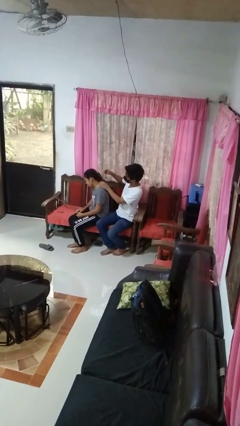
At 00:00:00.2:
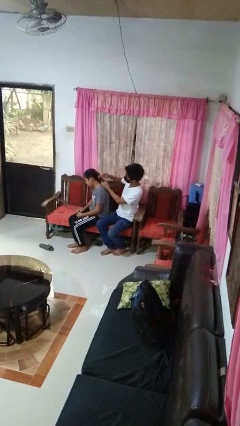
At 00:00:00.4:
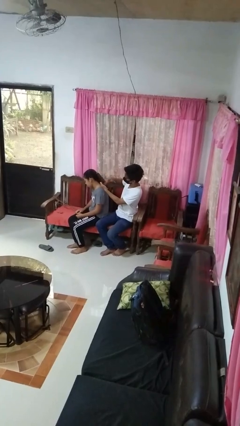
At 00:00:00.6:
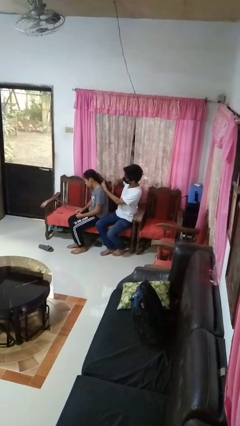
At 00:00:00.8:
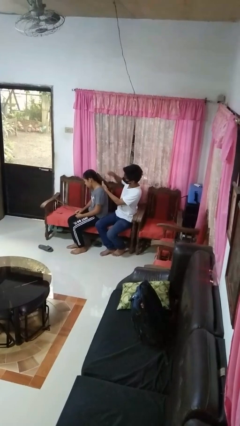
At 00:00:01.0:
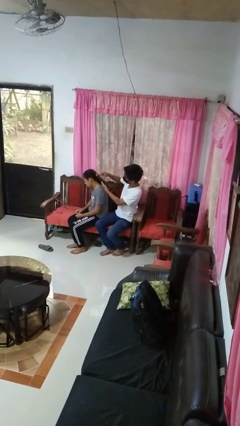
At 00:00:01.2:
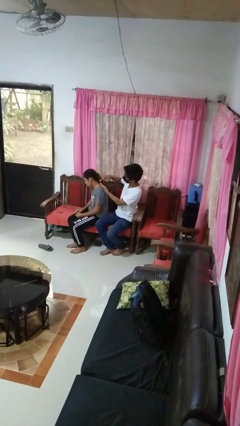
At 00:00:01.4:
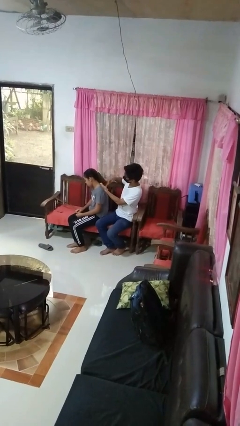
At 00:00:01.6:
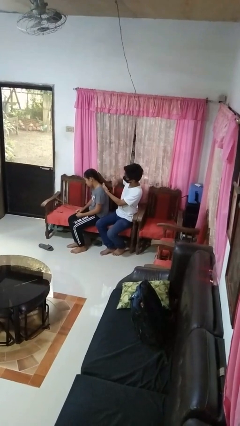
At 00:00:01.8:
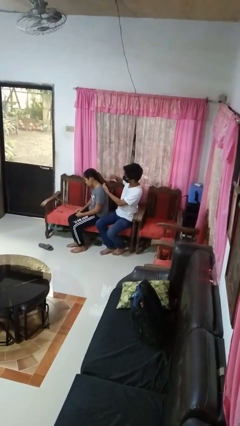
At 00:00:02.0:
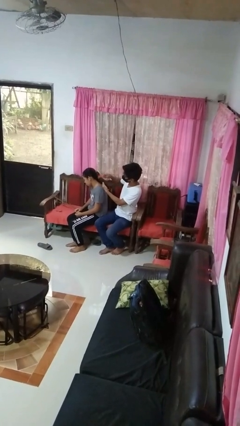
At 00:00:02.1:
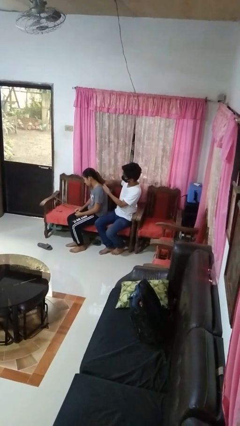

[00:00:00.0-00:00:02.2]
person brushes hair of person

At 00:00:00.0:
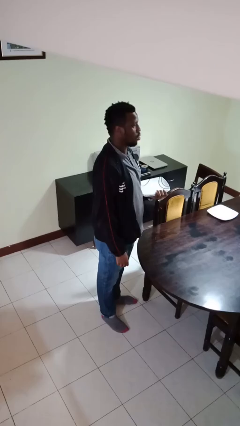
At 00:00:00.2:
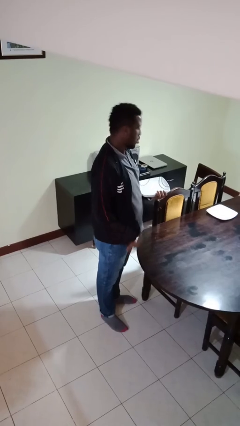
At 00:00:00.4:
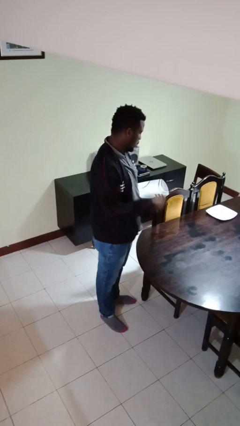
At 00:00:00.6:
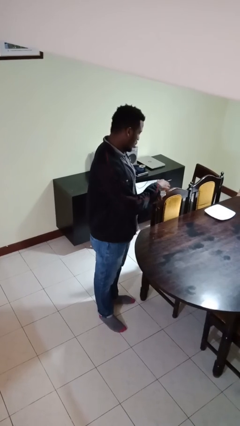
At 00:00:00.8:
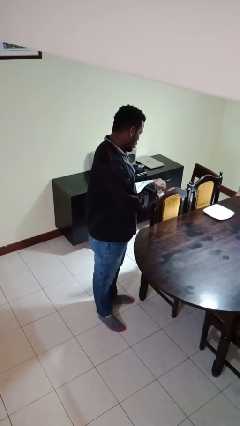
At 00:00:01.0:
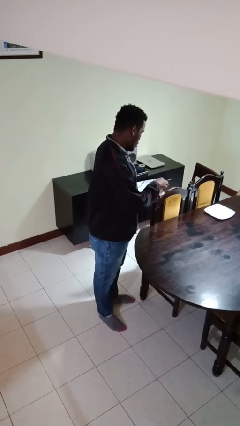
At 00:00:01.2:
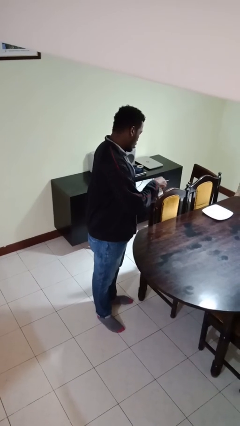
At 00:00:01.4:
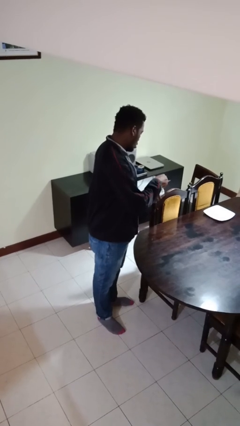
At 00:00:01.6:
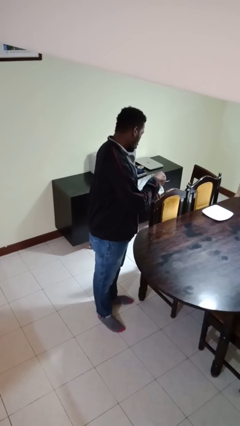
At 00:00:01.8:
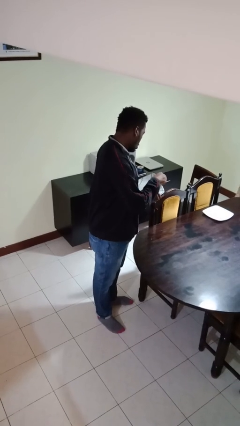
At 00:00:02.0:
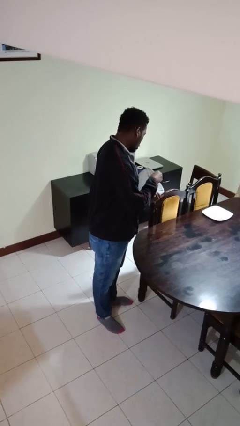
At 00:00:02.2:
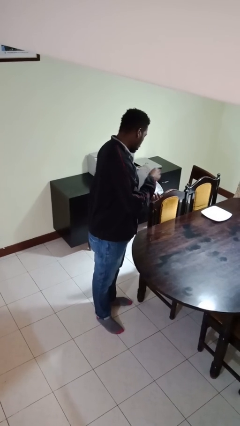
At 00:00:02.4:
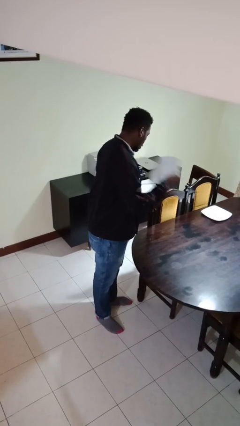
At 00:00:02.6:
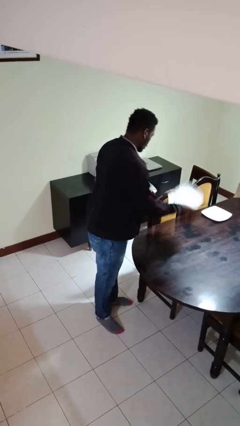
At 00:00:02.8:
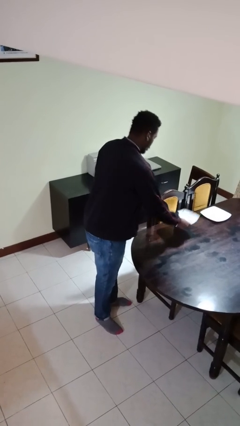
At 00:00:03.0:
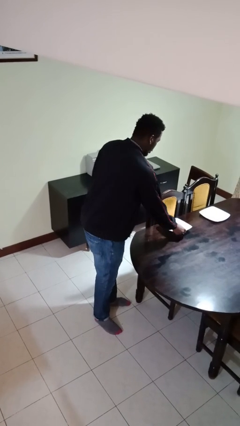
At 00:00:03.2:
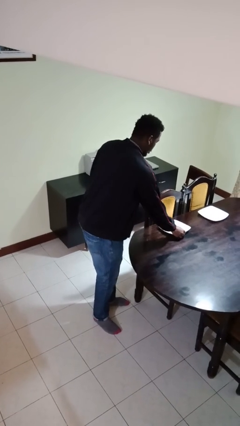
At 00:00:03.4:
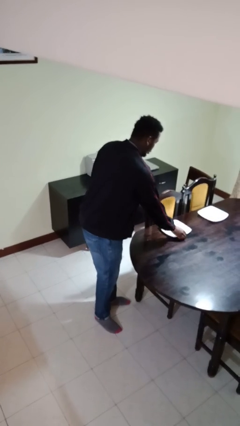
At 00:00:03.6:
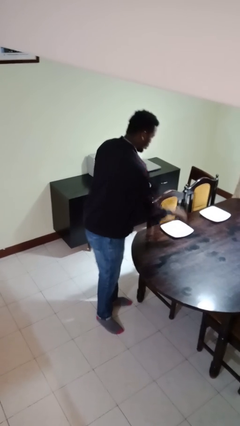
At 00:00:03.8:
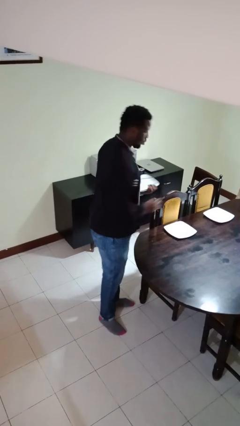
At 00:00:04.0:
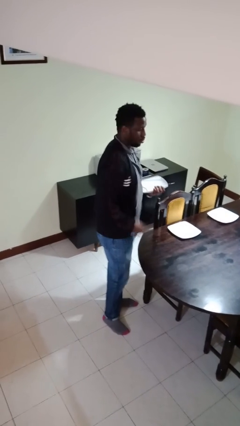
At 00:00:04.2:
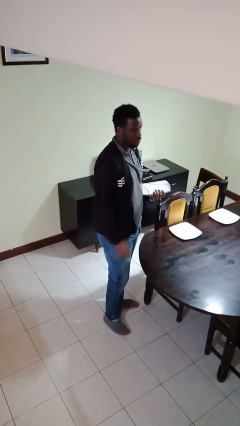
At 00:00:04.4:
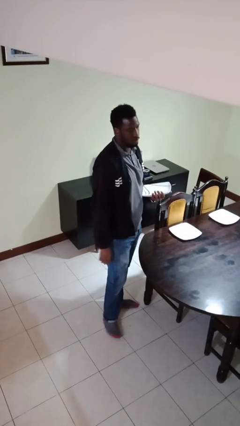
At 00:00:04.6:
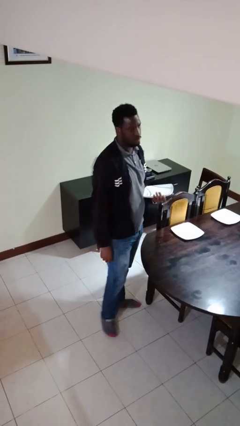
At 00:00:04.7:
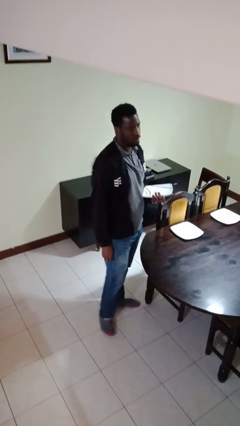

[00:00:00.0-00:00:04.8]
person sets table

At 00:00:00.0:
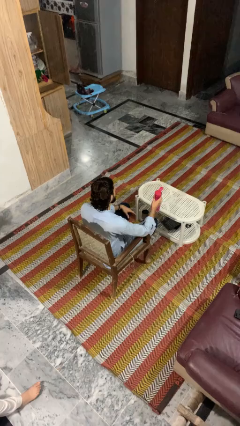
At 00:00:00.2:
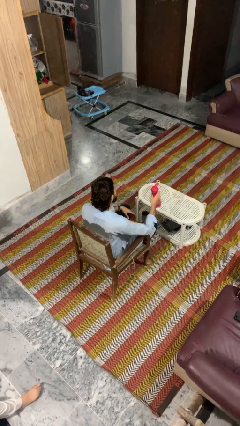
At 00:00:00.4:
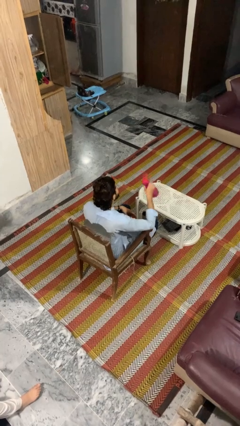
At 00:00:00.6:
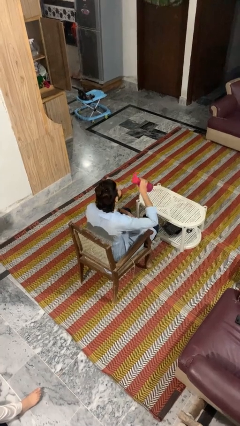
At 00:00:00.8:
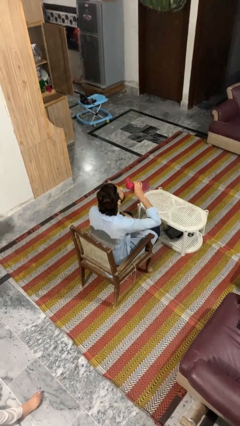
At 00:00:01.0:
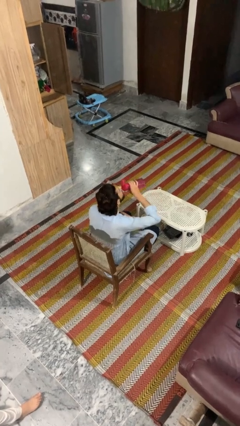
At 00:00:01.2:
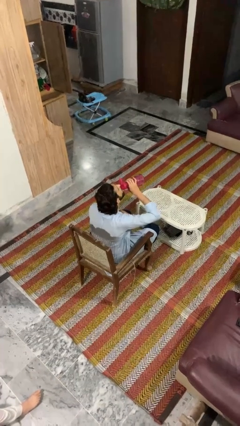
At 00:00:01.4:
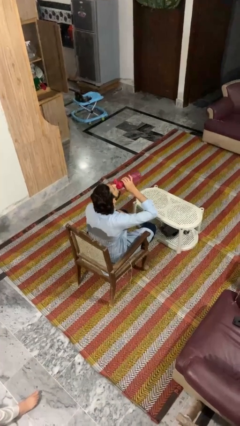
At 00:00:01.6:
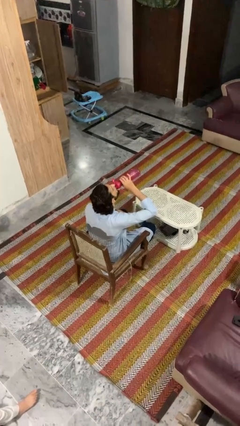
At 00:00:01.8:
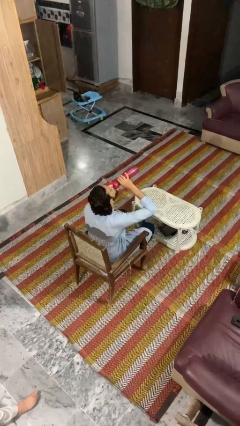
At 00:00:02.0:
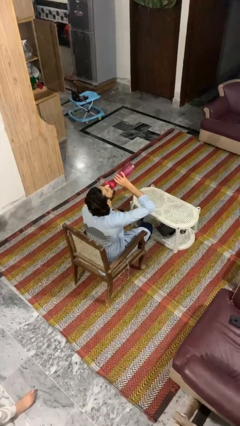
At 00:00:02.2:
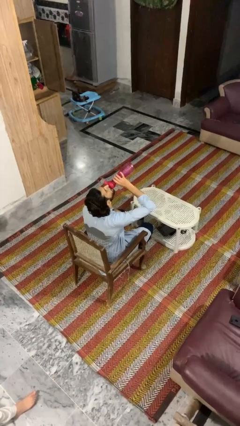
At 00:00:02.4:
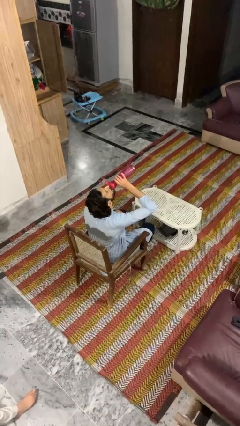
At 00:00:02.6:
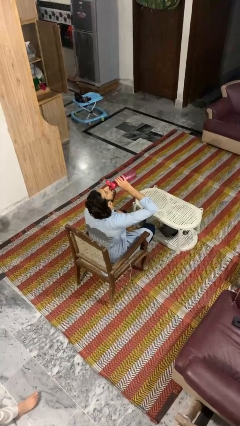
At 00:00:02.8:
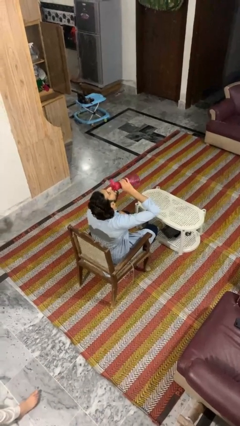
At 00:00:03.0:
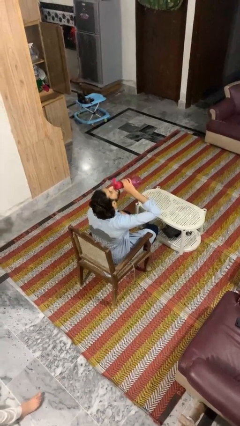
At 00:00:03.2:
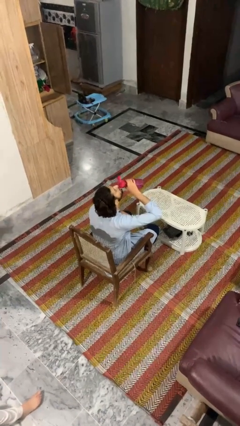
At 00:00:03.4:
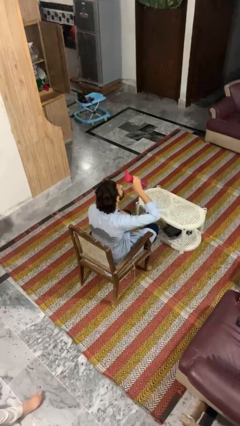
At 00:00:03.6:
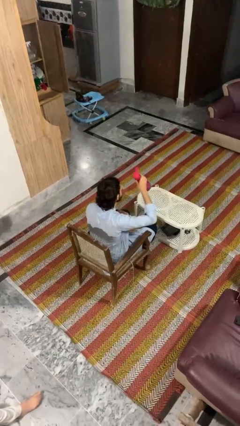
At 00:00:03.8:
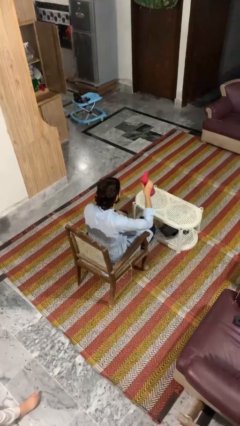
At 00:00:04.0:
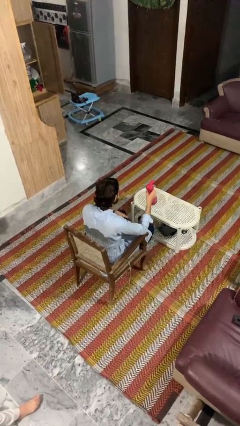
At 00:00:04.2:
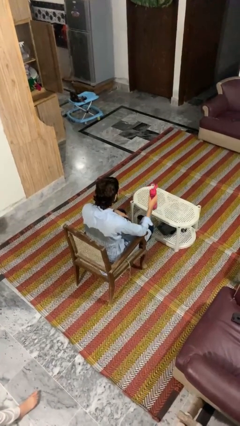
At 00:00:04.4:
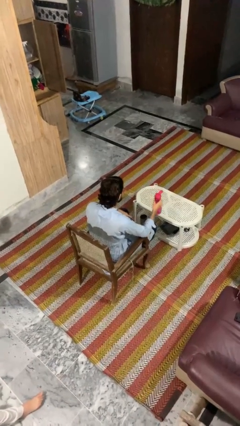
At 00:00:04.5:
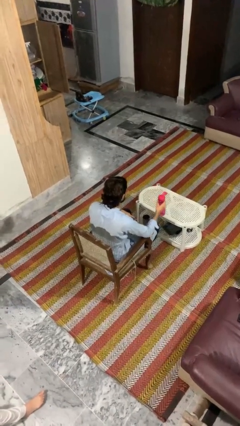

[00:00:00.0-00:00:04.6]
person drinks from bottle

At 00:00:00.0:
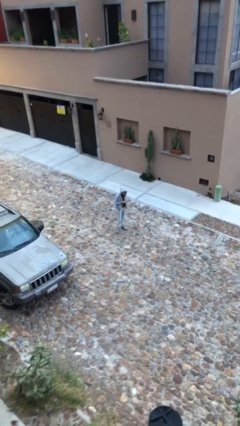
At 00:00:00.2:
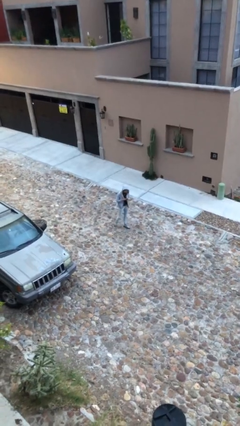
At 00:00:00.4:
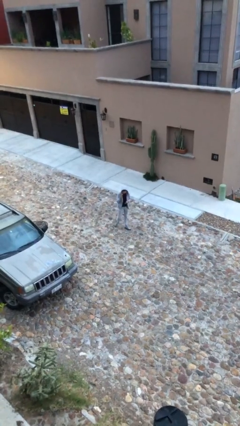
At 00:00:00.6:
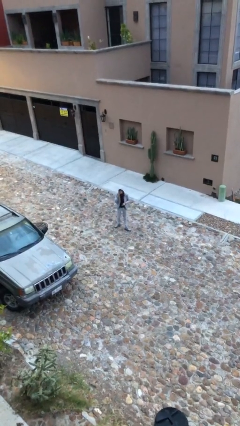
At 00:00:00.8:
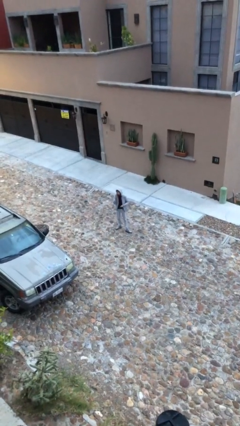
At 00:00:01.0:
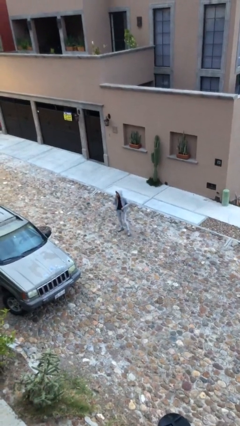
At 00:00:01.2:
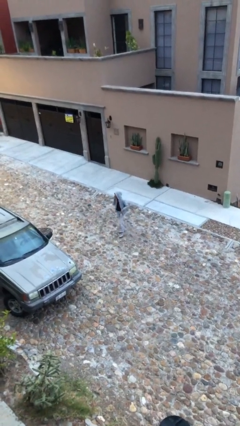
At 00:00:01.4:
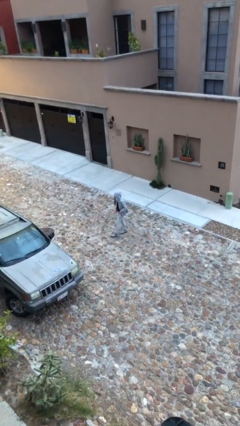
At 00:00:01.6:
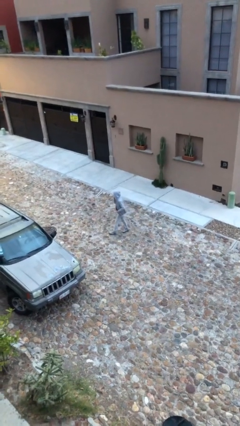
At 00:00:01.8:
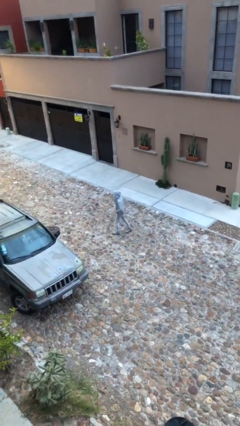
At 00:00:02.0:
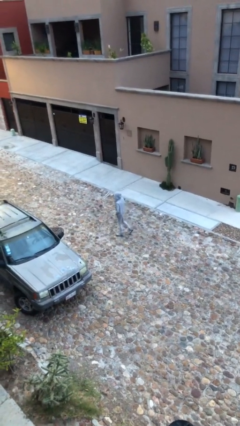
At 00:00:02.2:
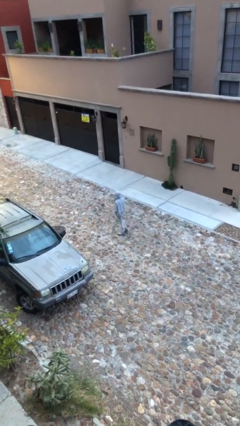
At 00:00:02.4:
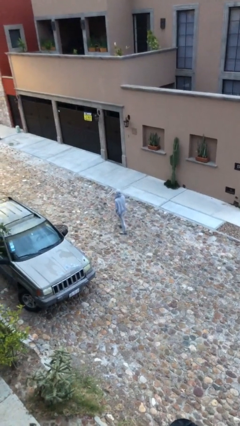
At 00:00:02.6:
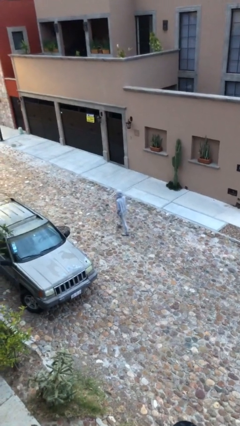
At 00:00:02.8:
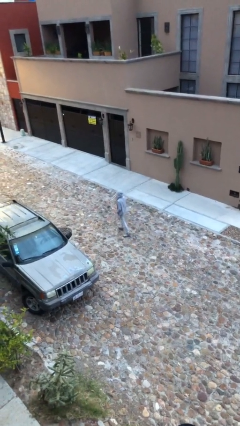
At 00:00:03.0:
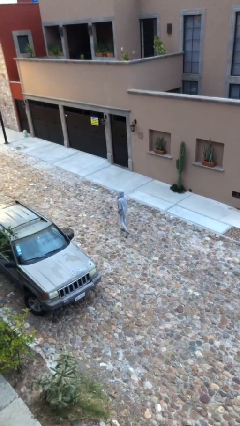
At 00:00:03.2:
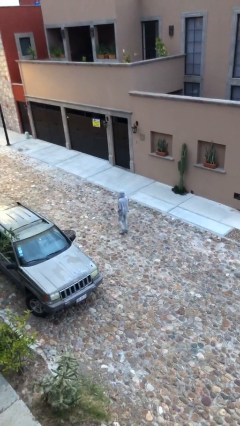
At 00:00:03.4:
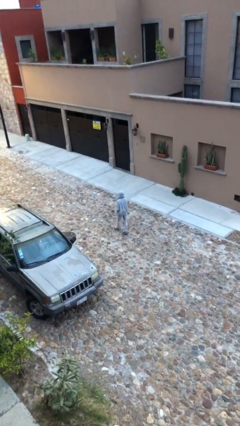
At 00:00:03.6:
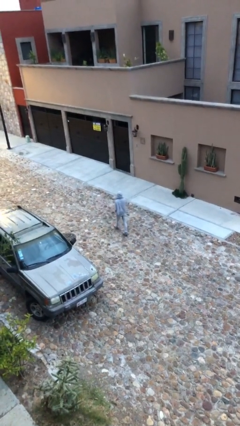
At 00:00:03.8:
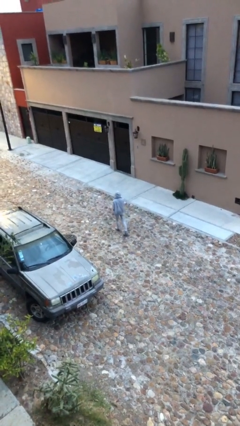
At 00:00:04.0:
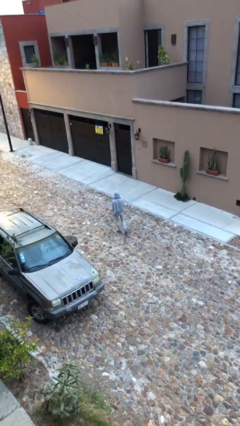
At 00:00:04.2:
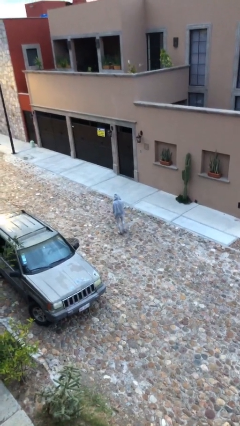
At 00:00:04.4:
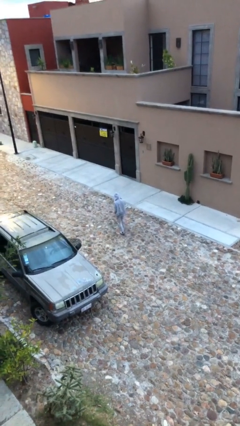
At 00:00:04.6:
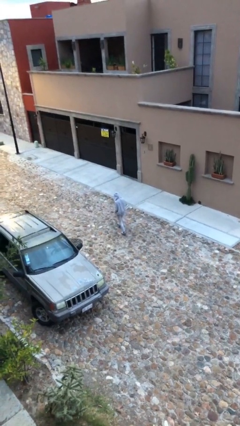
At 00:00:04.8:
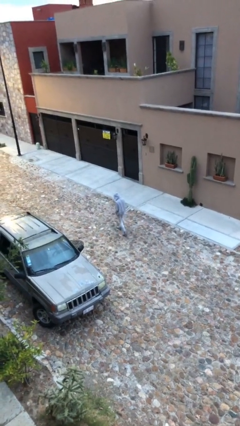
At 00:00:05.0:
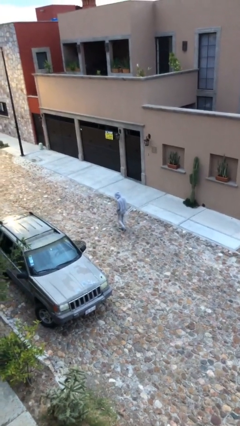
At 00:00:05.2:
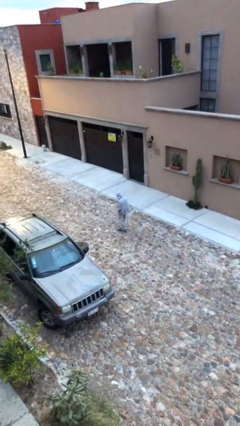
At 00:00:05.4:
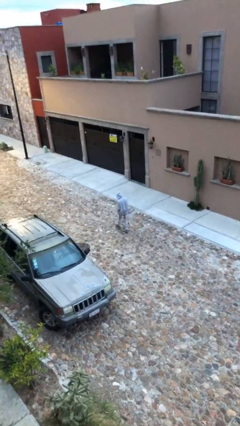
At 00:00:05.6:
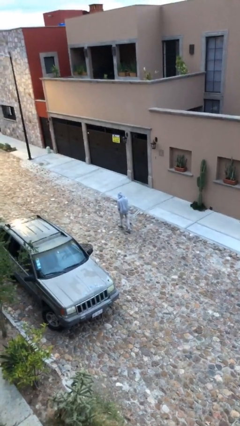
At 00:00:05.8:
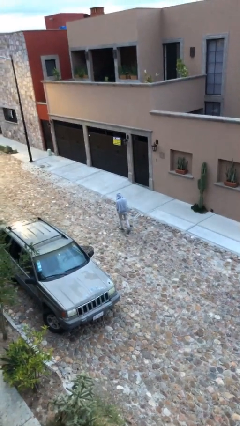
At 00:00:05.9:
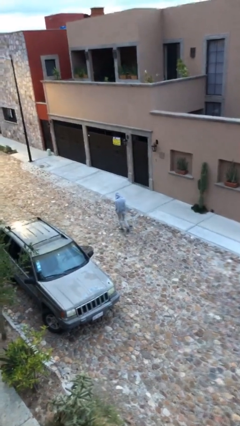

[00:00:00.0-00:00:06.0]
person talks on phone
